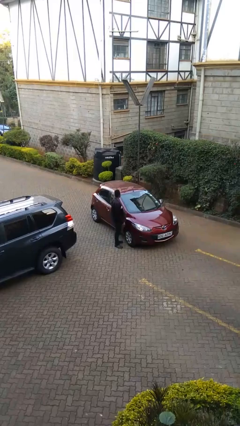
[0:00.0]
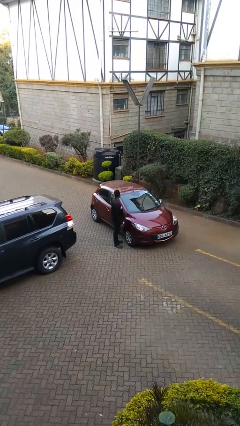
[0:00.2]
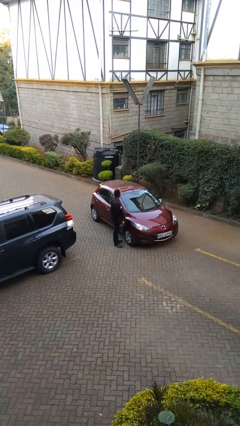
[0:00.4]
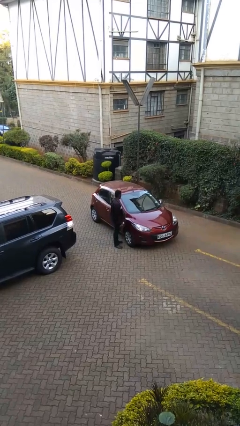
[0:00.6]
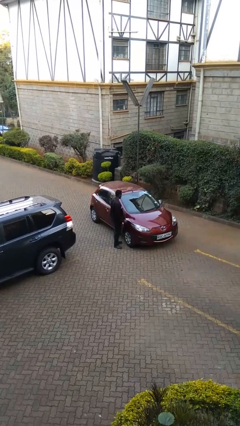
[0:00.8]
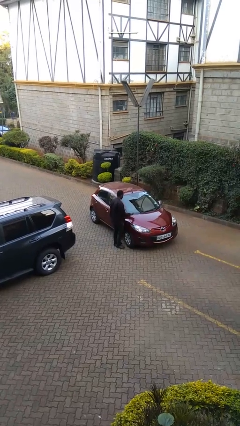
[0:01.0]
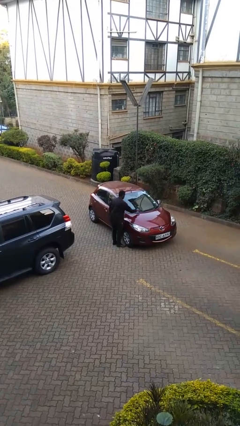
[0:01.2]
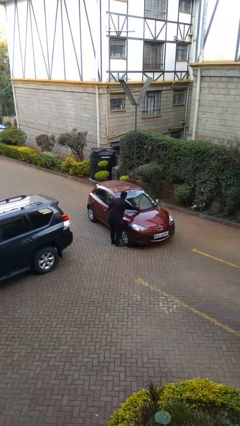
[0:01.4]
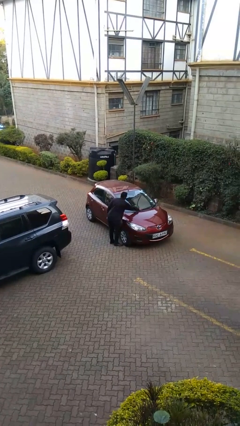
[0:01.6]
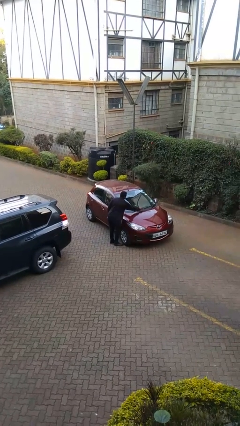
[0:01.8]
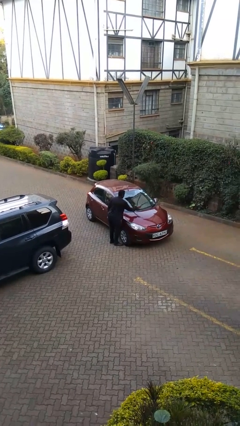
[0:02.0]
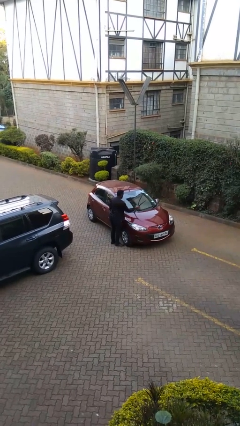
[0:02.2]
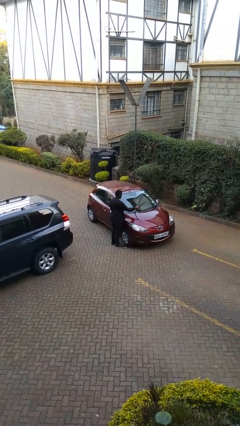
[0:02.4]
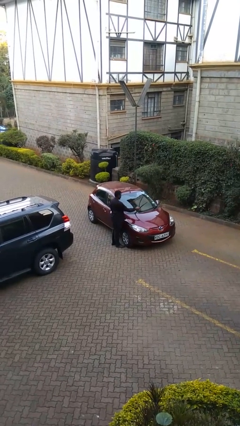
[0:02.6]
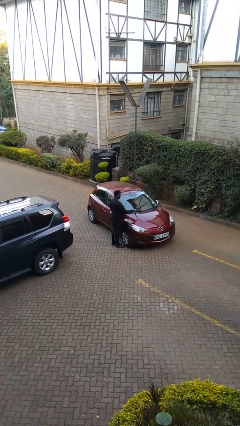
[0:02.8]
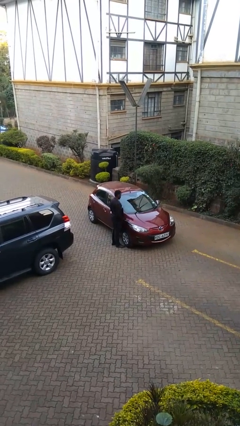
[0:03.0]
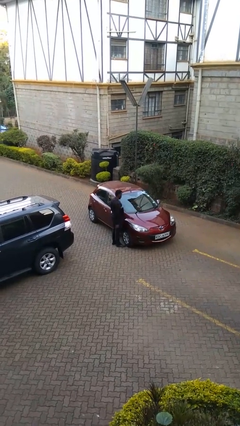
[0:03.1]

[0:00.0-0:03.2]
person flips up car wipers

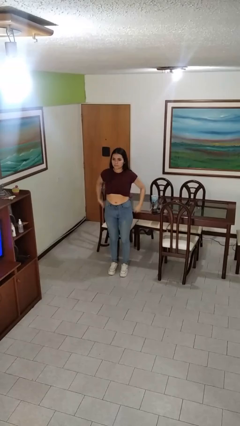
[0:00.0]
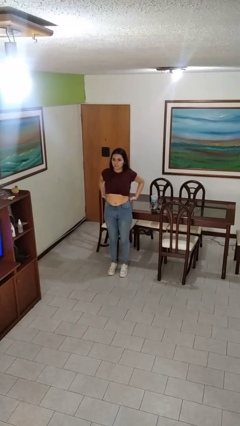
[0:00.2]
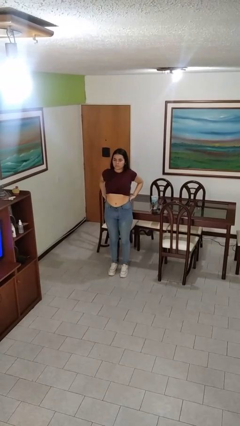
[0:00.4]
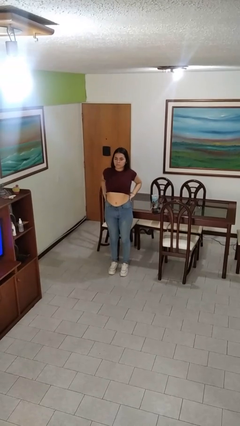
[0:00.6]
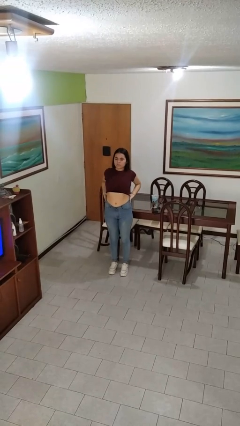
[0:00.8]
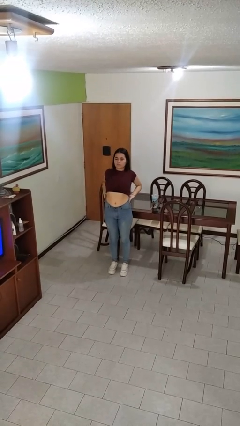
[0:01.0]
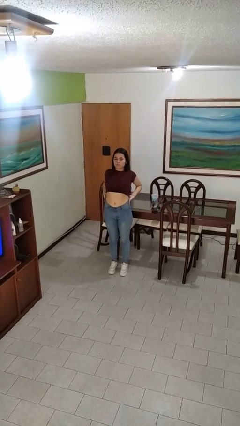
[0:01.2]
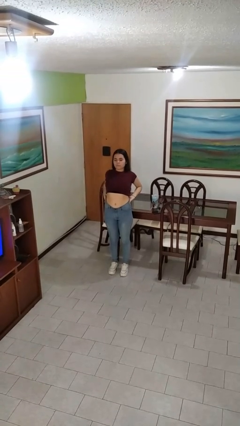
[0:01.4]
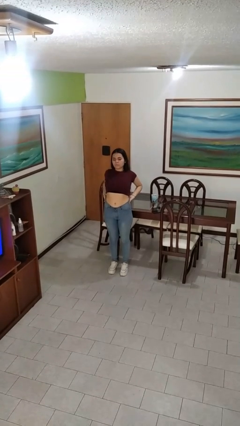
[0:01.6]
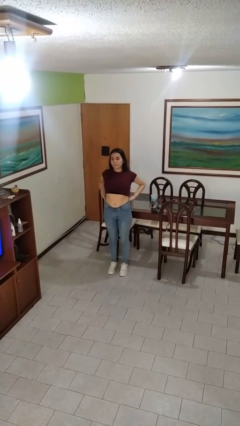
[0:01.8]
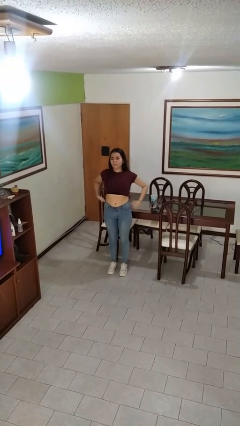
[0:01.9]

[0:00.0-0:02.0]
person stretches back

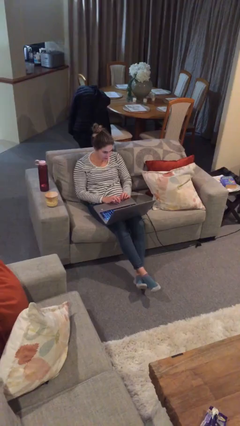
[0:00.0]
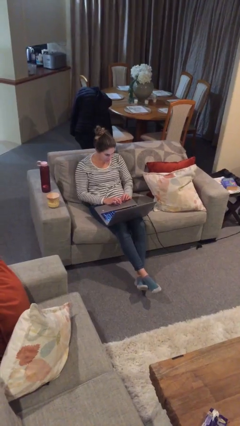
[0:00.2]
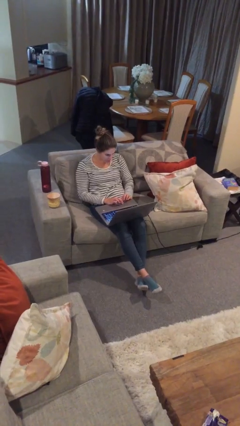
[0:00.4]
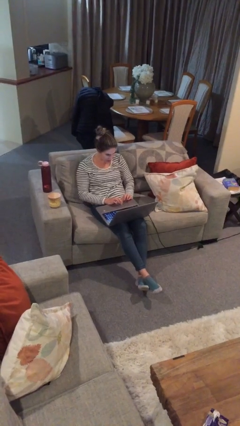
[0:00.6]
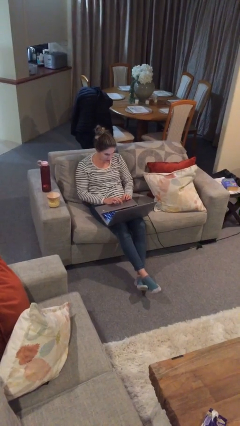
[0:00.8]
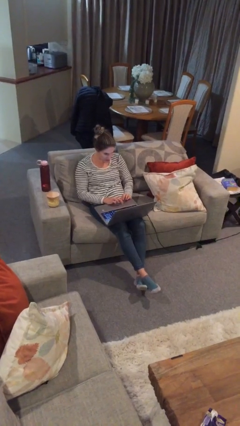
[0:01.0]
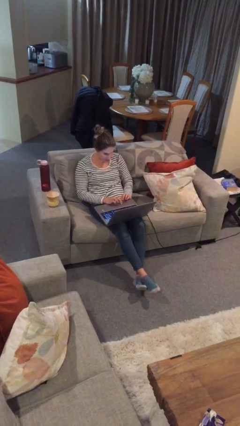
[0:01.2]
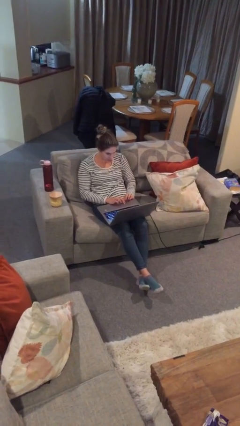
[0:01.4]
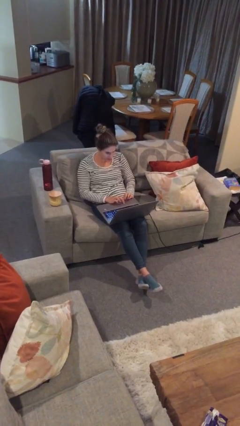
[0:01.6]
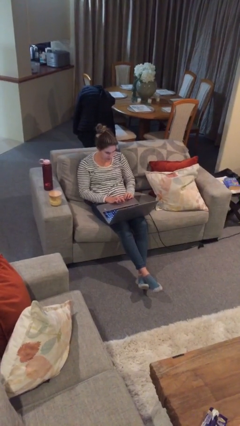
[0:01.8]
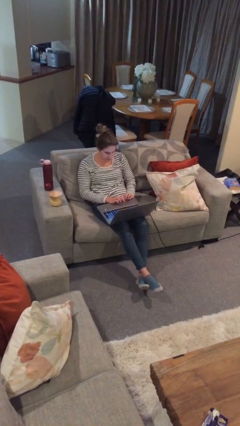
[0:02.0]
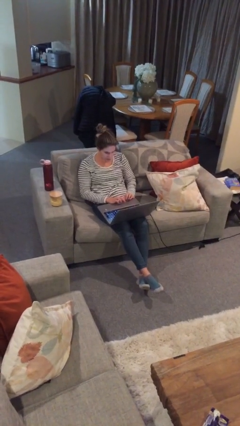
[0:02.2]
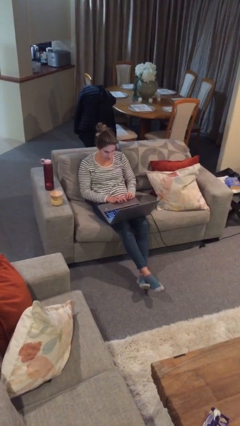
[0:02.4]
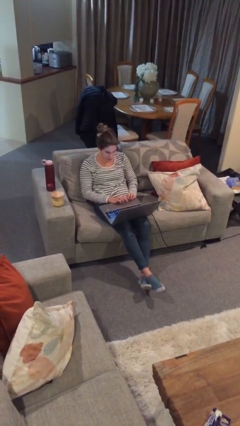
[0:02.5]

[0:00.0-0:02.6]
person interacts with laptop

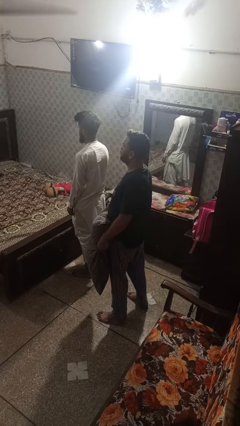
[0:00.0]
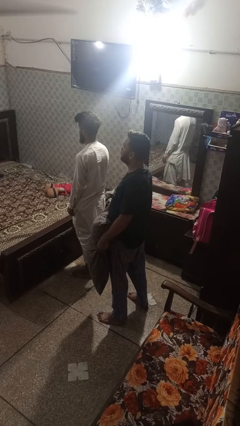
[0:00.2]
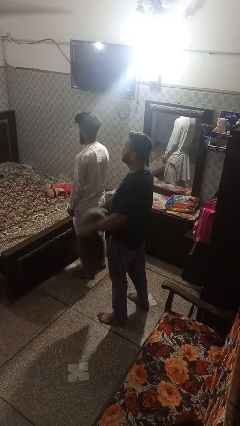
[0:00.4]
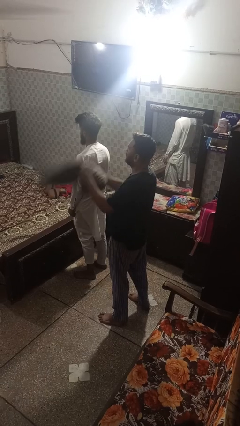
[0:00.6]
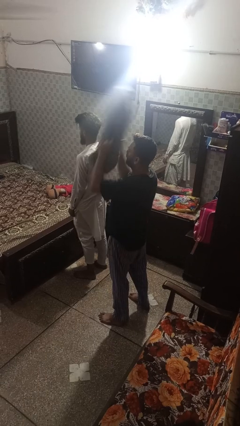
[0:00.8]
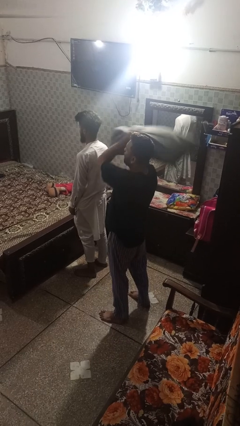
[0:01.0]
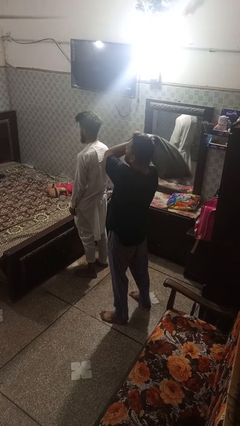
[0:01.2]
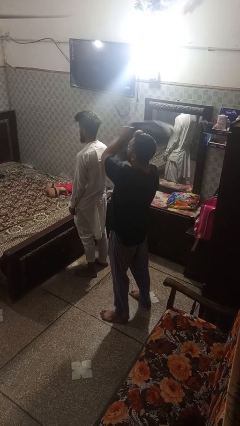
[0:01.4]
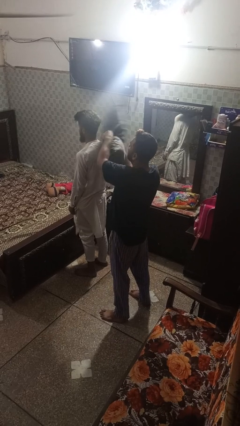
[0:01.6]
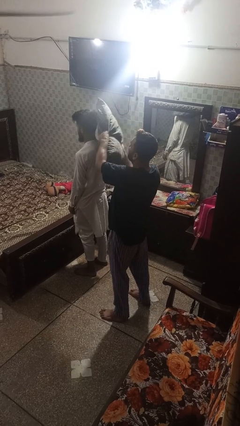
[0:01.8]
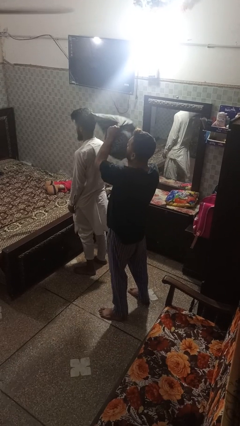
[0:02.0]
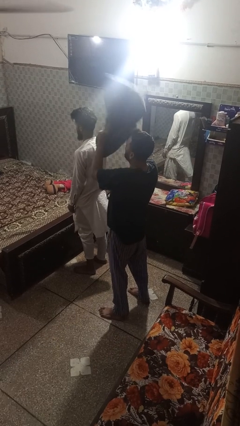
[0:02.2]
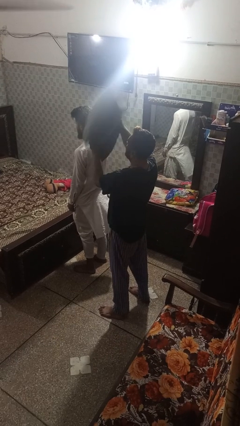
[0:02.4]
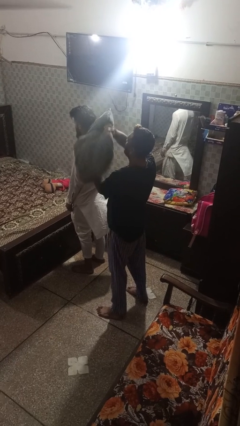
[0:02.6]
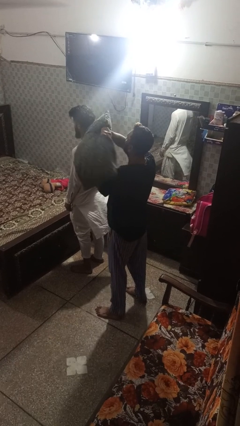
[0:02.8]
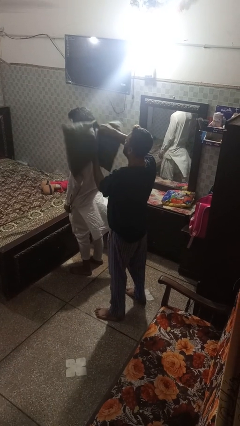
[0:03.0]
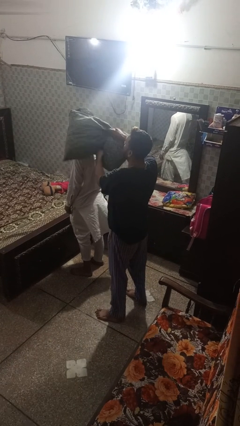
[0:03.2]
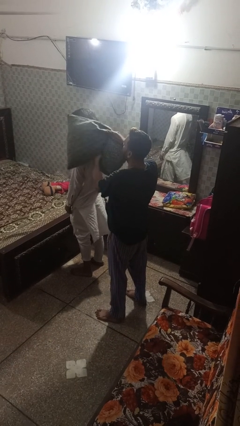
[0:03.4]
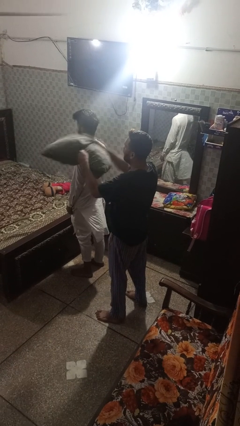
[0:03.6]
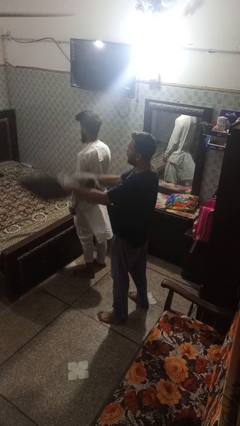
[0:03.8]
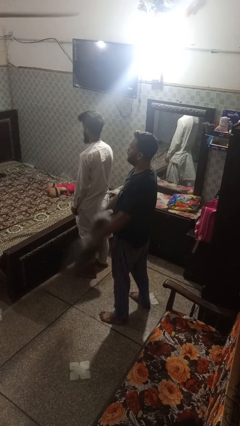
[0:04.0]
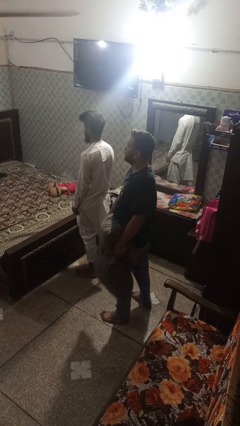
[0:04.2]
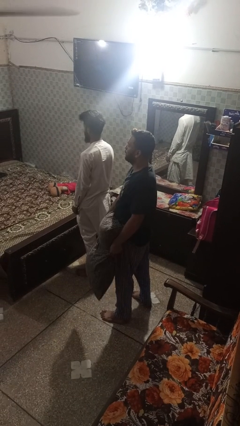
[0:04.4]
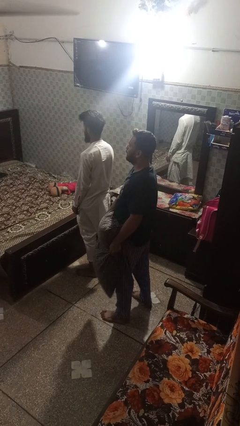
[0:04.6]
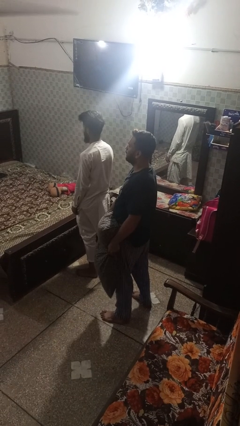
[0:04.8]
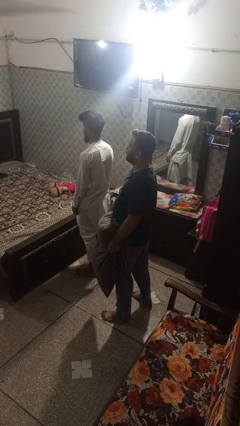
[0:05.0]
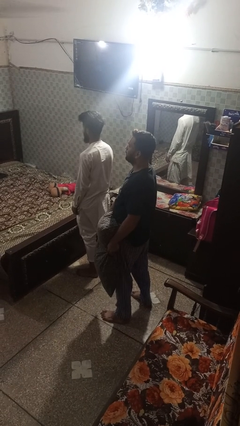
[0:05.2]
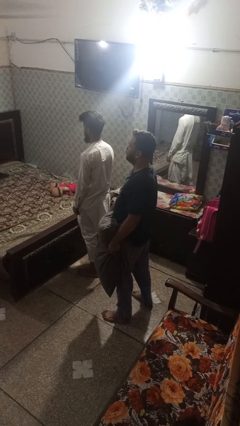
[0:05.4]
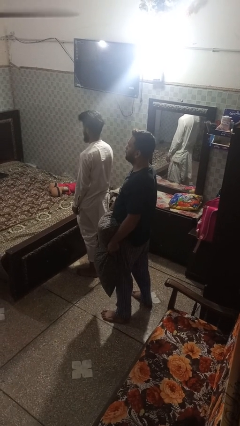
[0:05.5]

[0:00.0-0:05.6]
person hits person with pillow

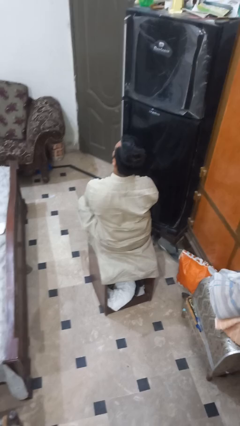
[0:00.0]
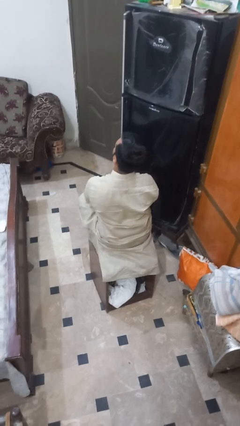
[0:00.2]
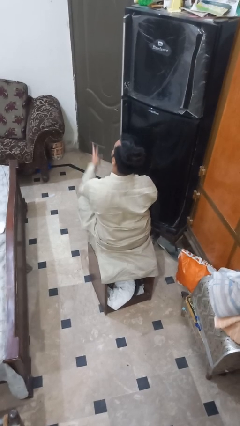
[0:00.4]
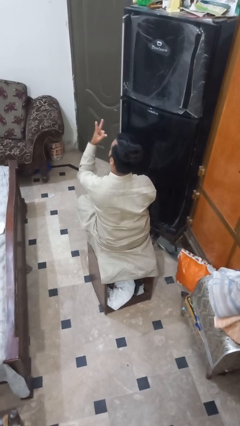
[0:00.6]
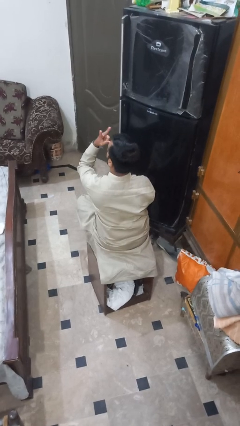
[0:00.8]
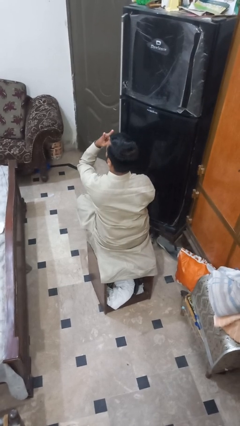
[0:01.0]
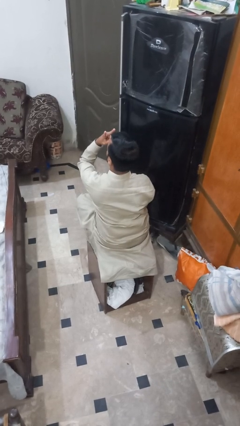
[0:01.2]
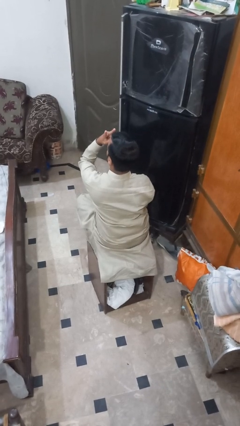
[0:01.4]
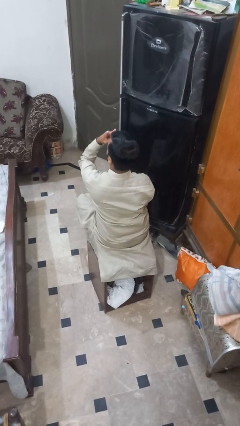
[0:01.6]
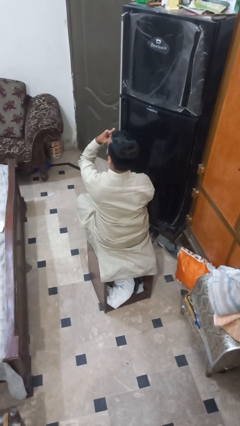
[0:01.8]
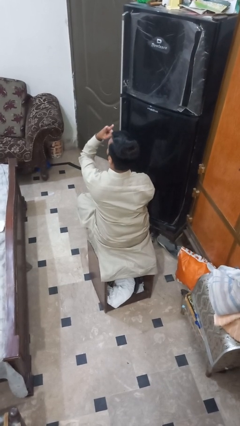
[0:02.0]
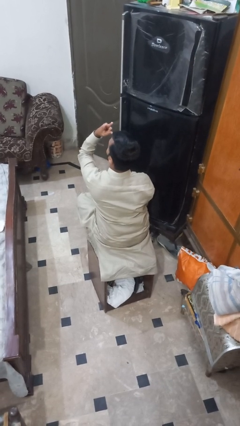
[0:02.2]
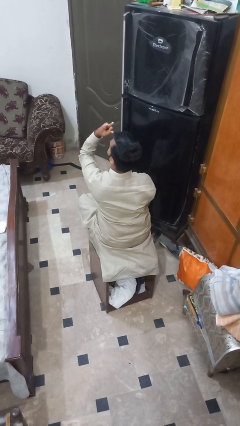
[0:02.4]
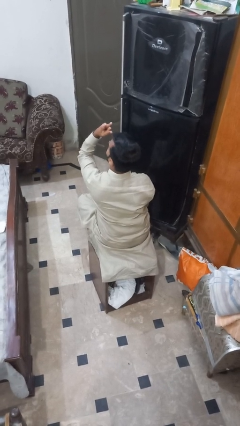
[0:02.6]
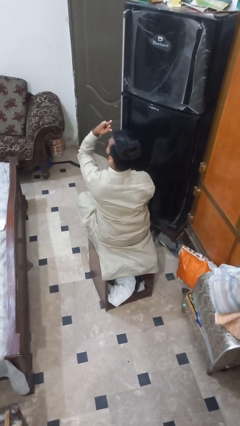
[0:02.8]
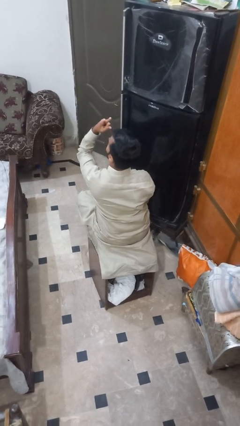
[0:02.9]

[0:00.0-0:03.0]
person gestures watch closely

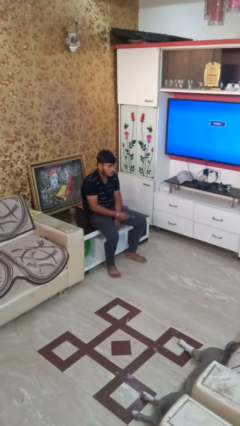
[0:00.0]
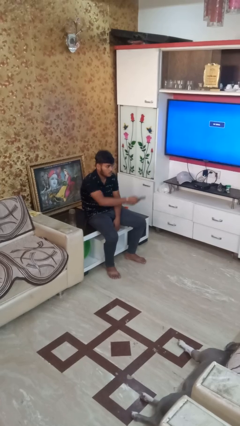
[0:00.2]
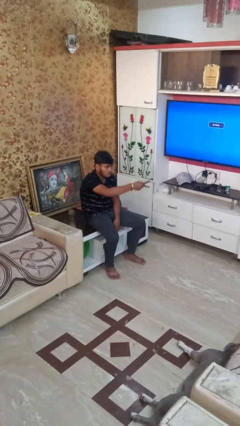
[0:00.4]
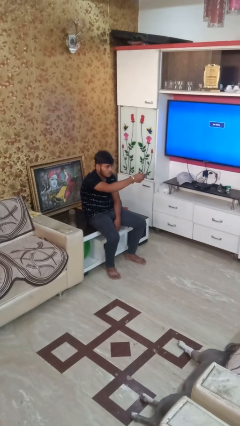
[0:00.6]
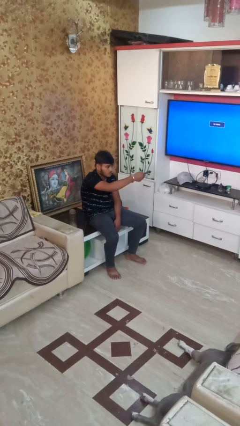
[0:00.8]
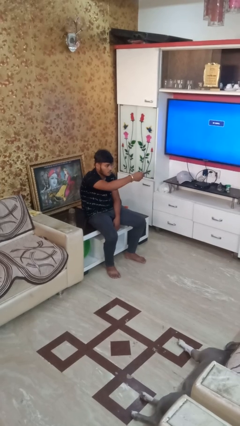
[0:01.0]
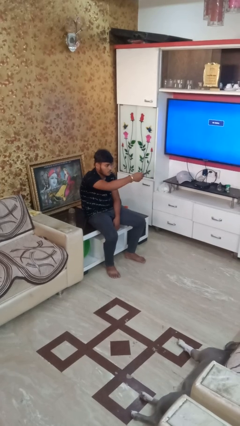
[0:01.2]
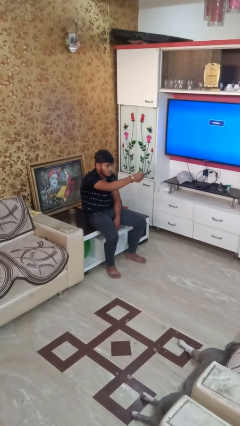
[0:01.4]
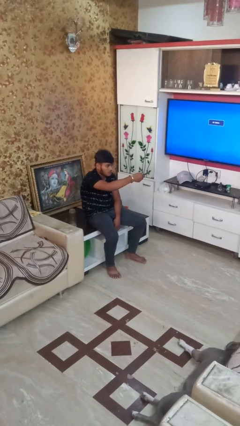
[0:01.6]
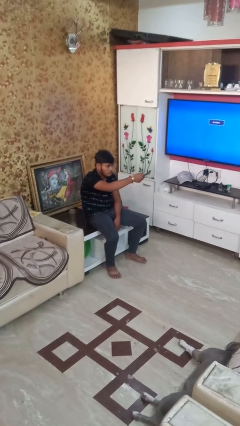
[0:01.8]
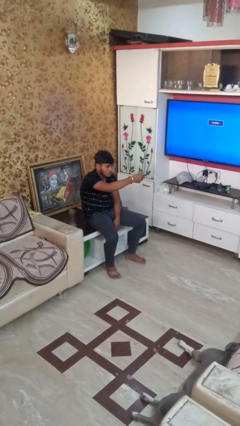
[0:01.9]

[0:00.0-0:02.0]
person uses television remote
